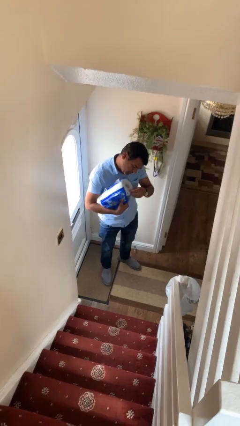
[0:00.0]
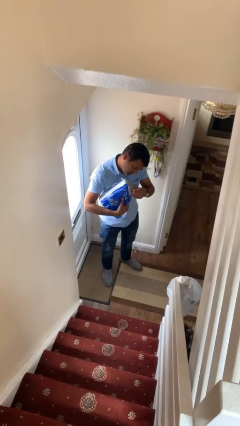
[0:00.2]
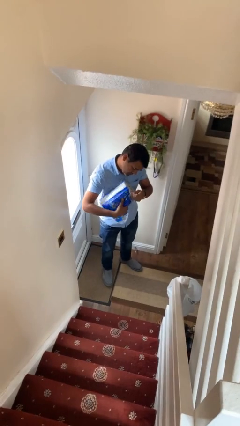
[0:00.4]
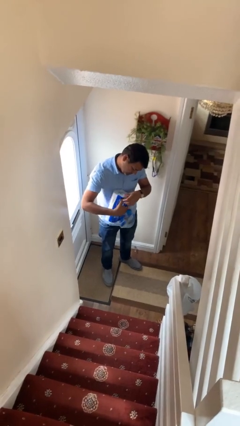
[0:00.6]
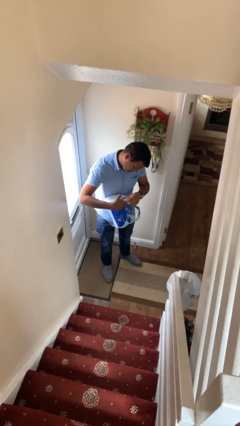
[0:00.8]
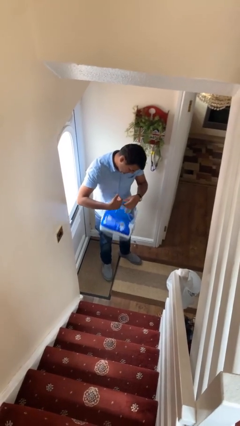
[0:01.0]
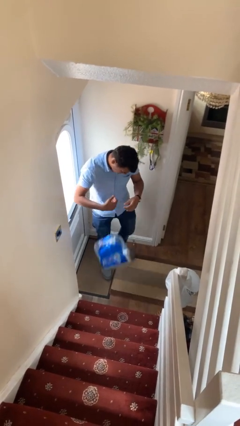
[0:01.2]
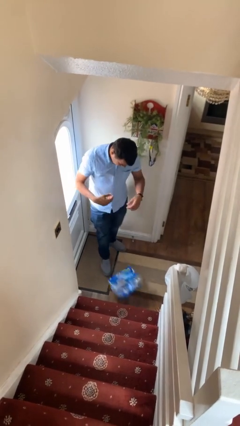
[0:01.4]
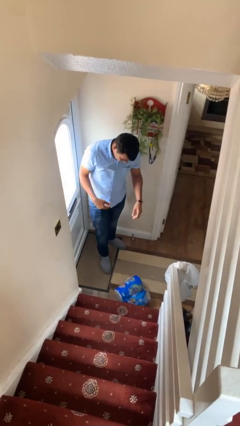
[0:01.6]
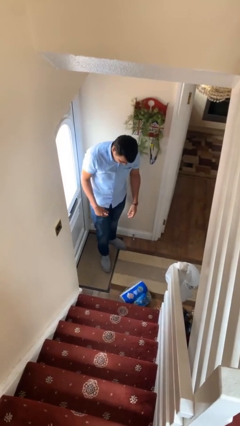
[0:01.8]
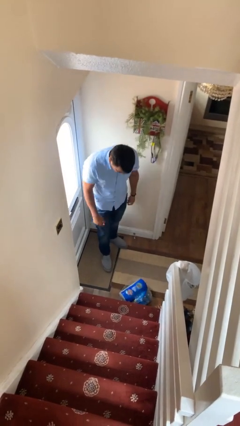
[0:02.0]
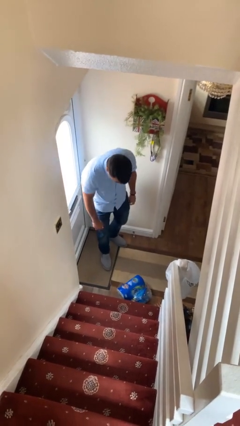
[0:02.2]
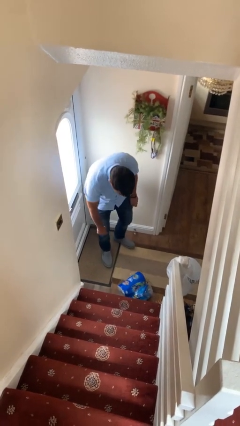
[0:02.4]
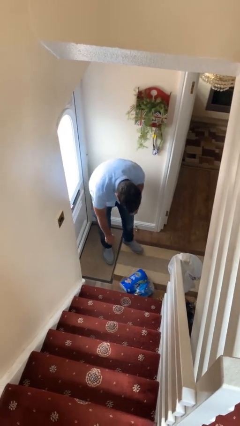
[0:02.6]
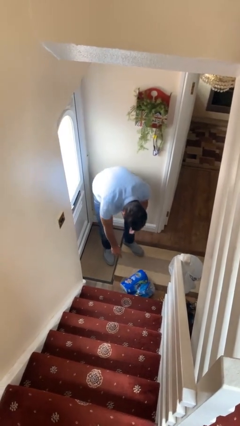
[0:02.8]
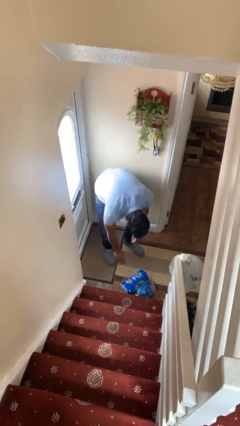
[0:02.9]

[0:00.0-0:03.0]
person drops object

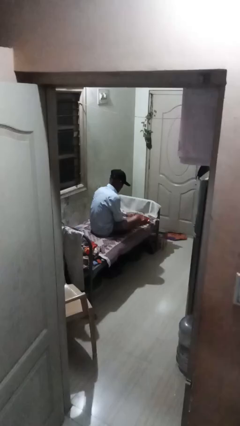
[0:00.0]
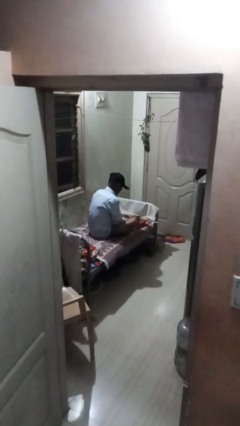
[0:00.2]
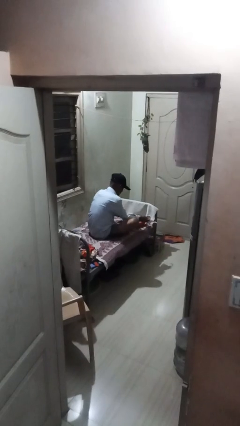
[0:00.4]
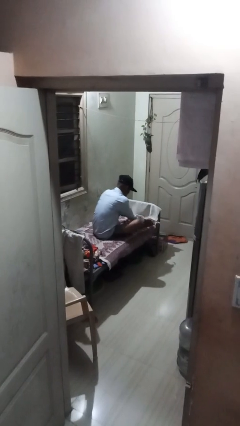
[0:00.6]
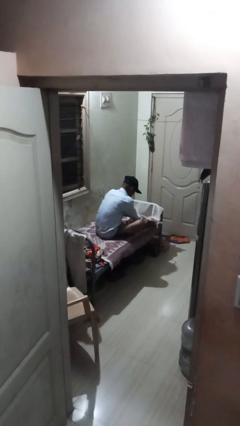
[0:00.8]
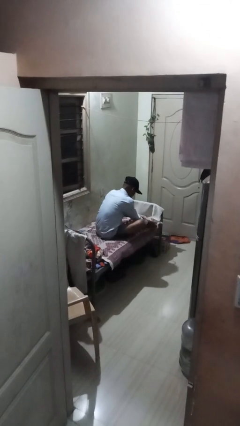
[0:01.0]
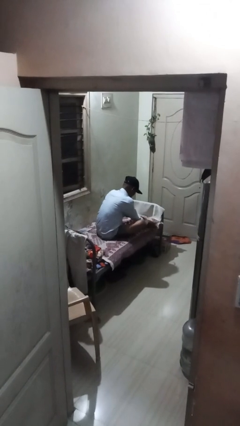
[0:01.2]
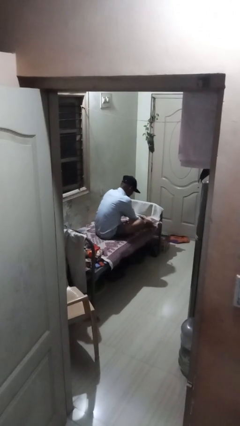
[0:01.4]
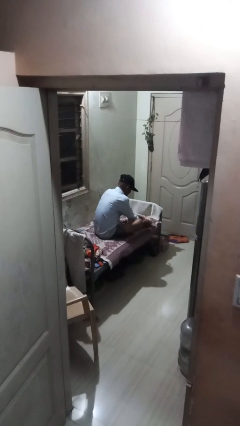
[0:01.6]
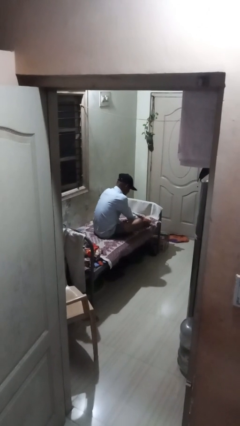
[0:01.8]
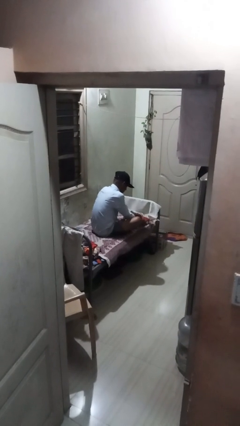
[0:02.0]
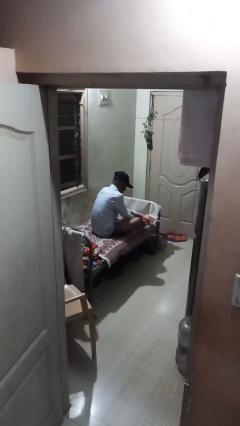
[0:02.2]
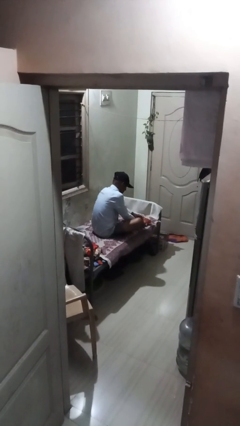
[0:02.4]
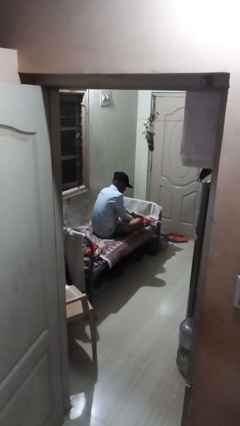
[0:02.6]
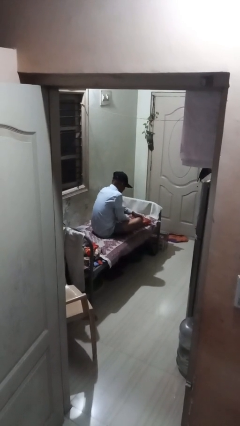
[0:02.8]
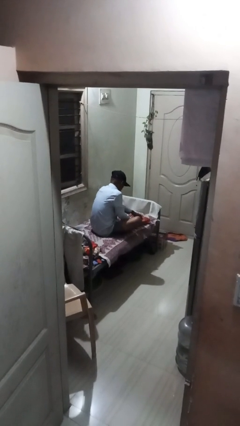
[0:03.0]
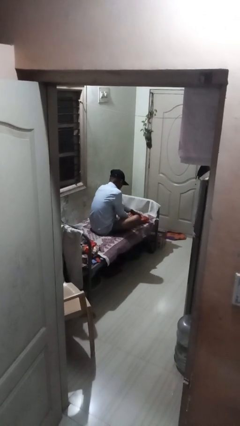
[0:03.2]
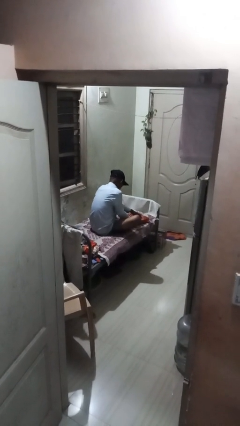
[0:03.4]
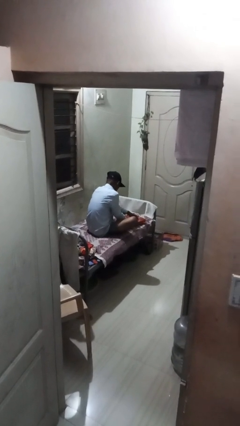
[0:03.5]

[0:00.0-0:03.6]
person wraps box

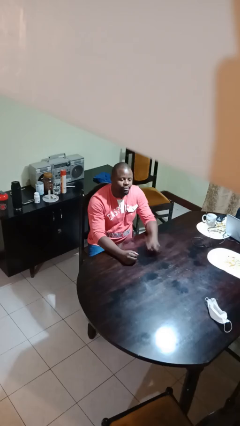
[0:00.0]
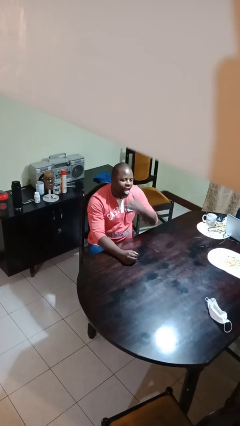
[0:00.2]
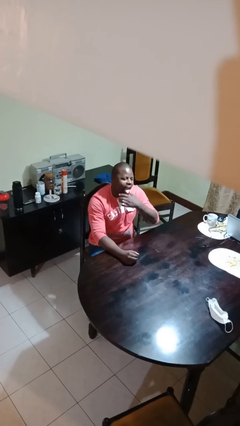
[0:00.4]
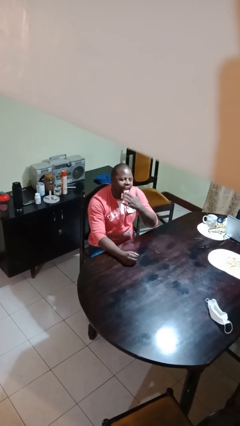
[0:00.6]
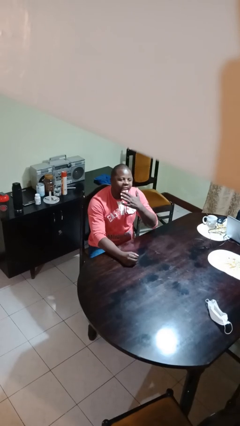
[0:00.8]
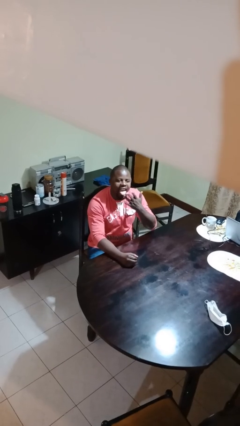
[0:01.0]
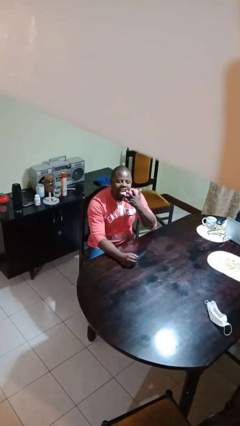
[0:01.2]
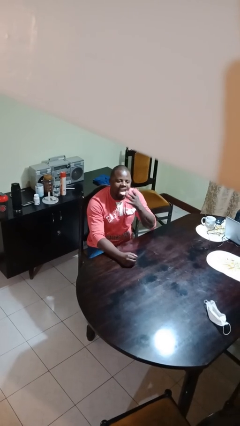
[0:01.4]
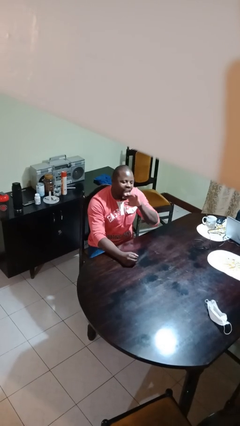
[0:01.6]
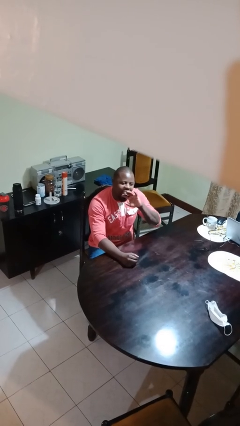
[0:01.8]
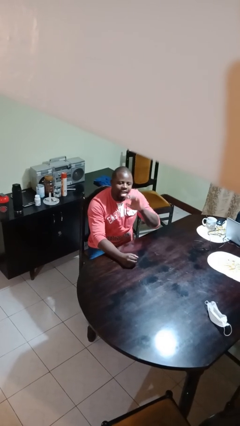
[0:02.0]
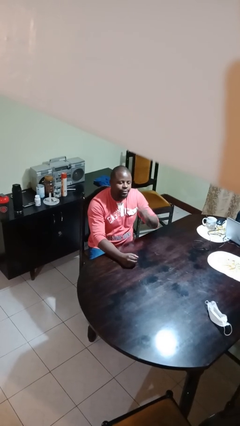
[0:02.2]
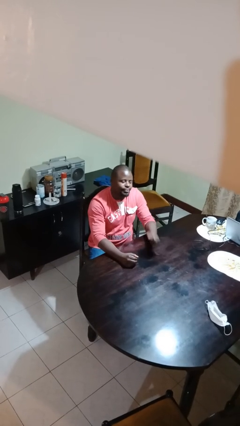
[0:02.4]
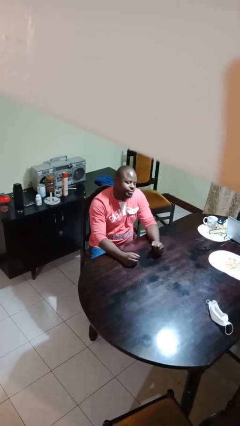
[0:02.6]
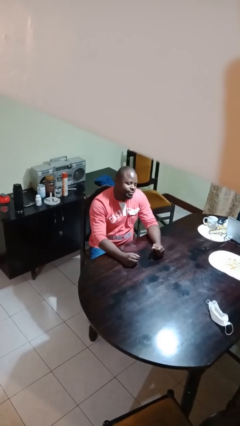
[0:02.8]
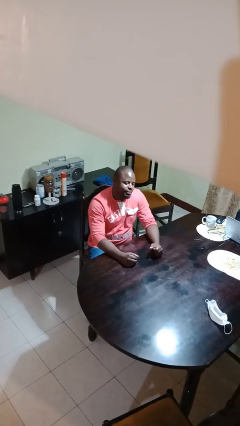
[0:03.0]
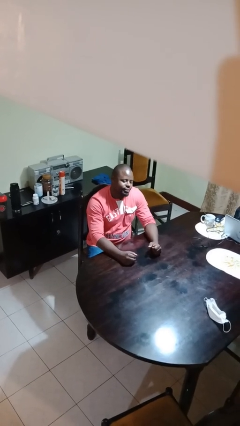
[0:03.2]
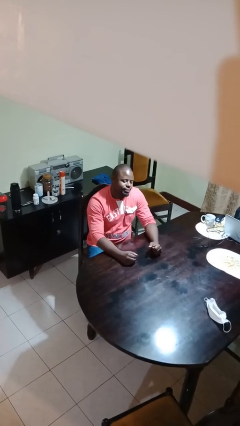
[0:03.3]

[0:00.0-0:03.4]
person licks fingers

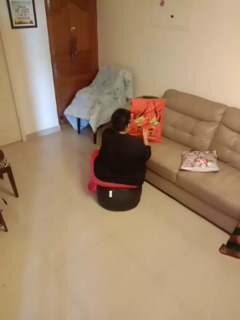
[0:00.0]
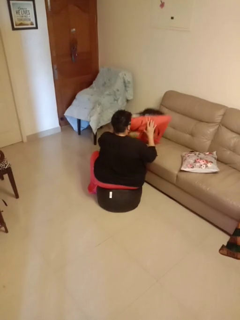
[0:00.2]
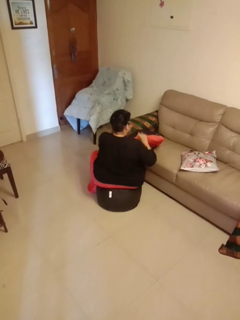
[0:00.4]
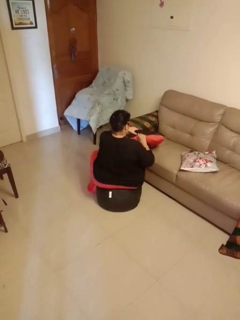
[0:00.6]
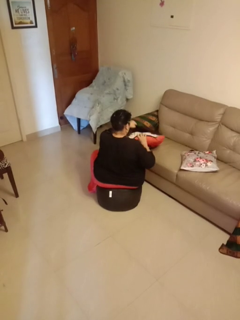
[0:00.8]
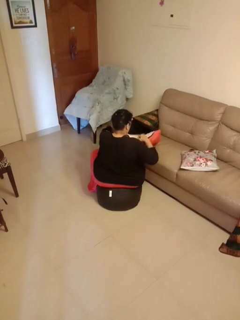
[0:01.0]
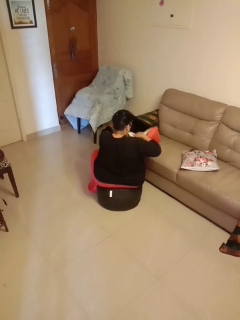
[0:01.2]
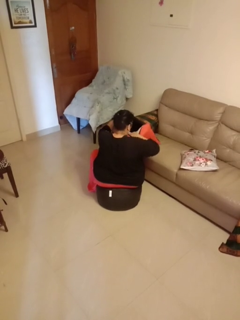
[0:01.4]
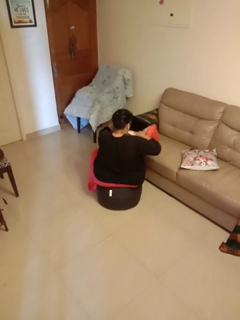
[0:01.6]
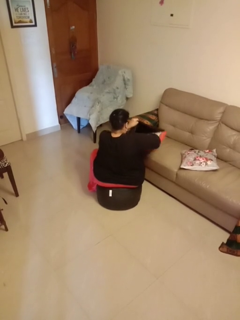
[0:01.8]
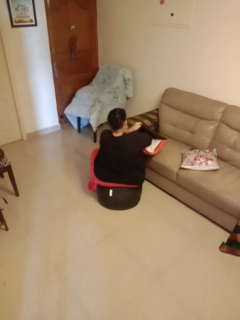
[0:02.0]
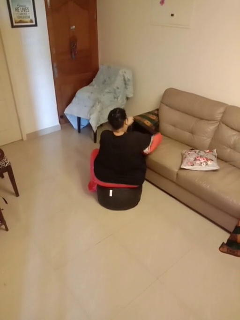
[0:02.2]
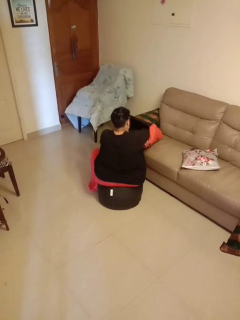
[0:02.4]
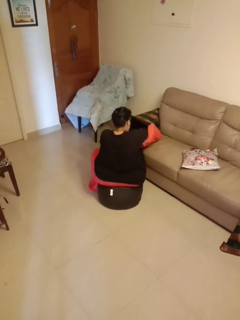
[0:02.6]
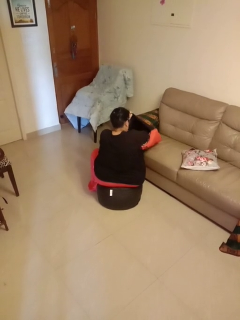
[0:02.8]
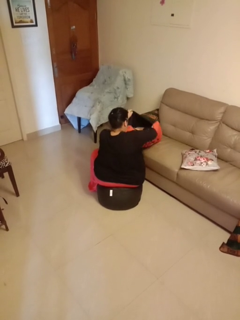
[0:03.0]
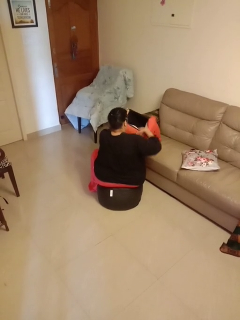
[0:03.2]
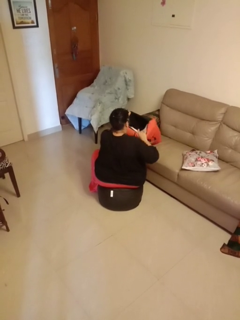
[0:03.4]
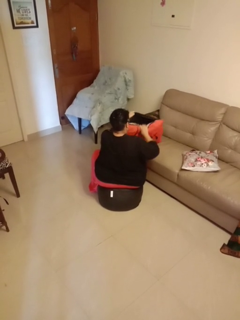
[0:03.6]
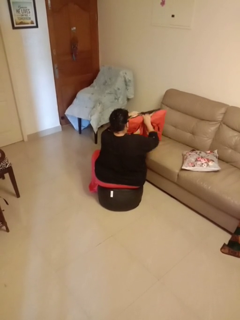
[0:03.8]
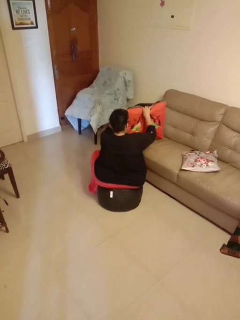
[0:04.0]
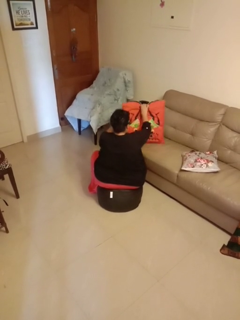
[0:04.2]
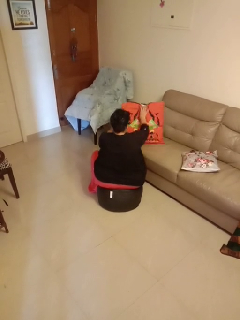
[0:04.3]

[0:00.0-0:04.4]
person searches in couch

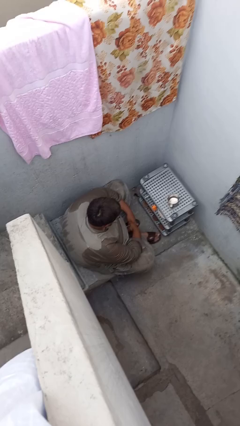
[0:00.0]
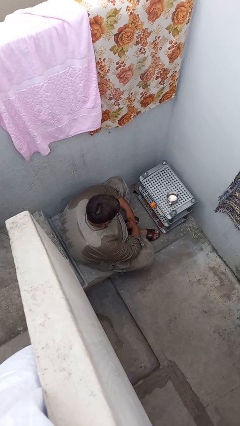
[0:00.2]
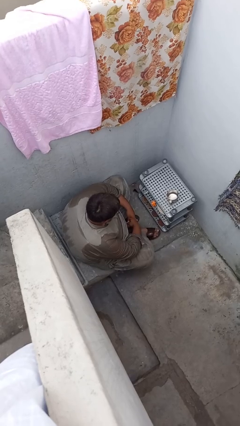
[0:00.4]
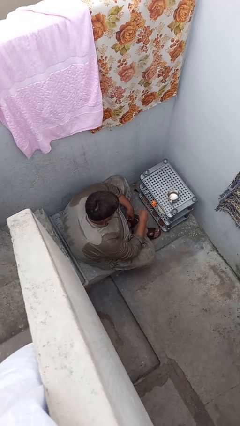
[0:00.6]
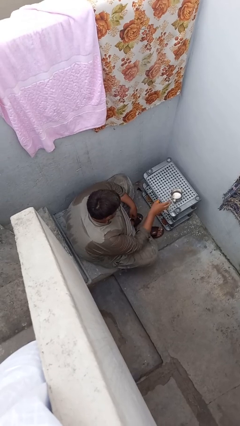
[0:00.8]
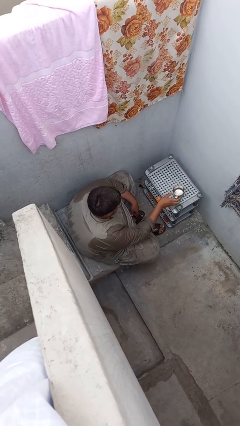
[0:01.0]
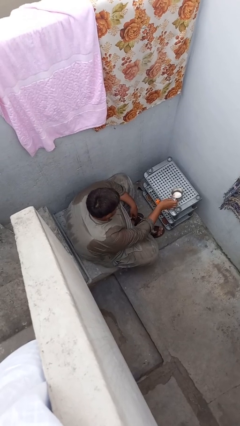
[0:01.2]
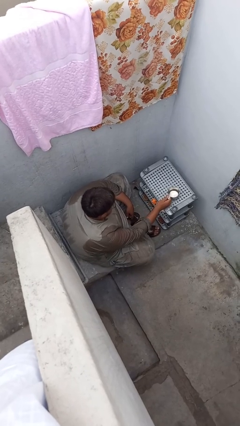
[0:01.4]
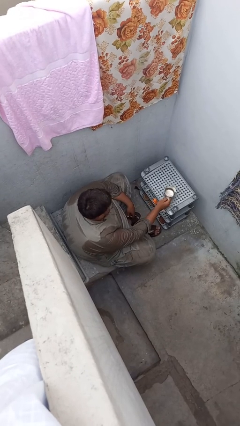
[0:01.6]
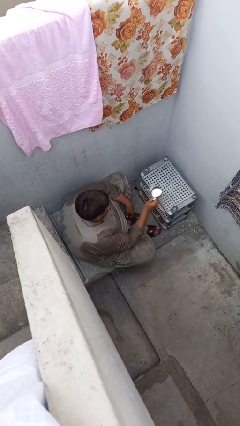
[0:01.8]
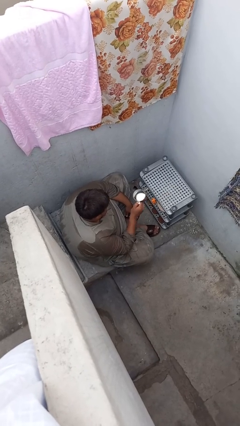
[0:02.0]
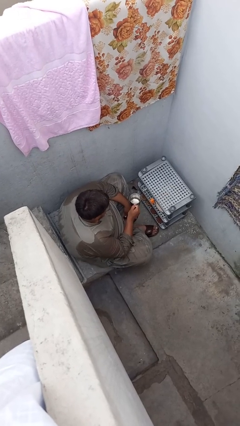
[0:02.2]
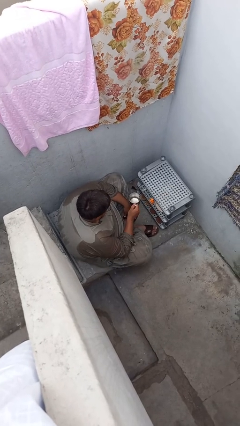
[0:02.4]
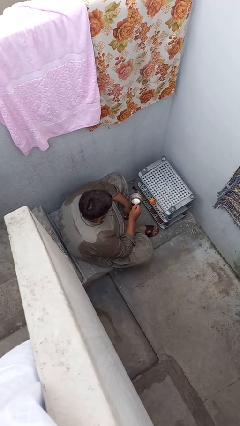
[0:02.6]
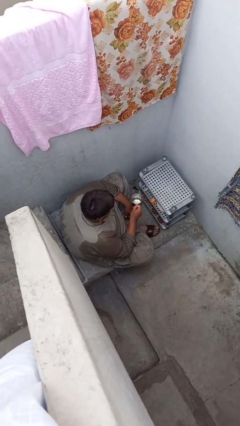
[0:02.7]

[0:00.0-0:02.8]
person picks up object from table

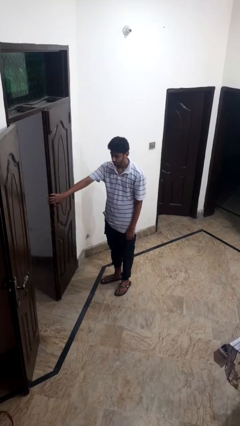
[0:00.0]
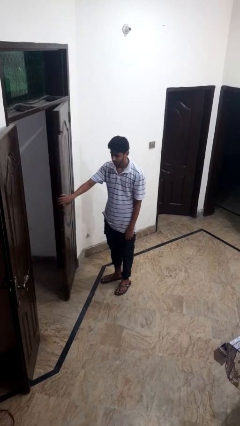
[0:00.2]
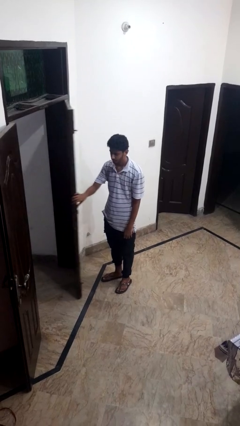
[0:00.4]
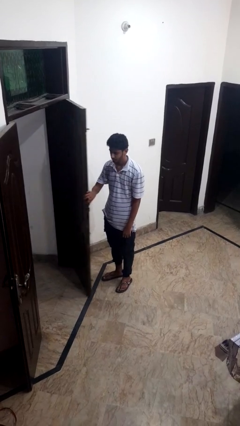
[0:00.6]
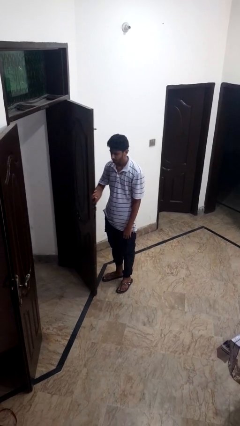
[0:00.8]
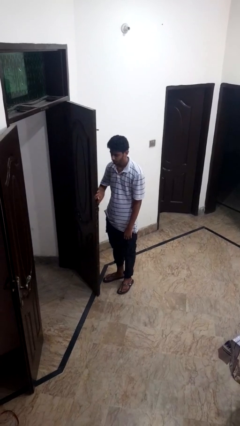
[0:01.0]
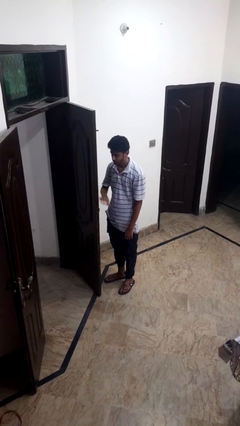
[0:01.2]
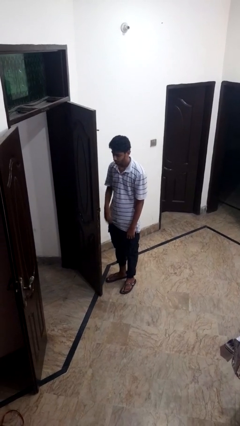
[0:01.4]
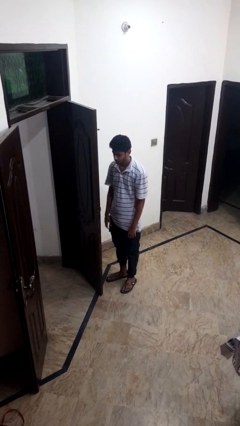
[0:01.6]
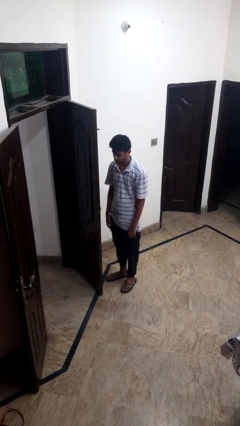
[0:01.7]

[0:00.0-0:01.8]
person opens facility door
